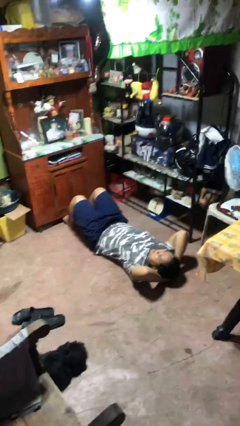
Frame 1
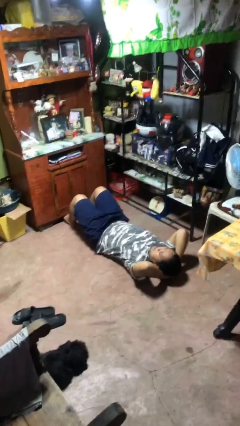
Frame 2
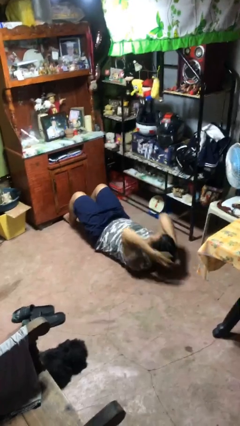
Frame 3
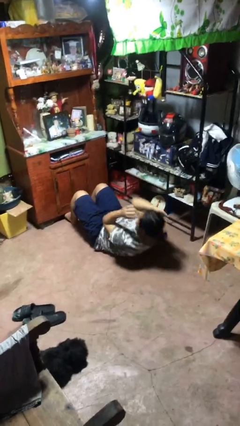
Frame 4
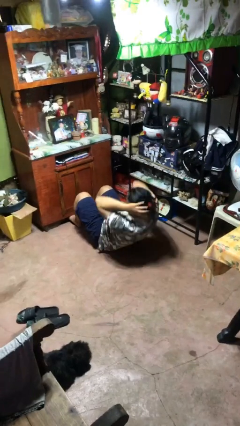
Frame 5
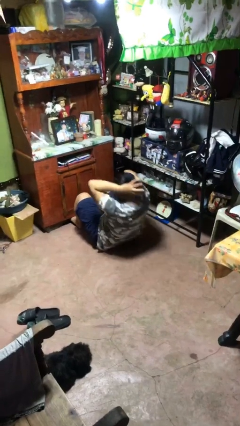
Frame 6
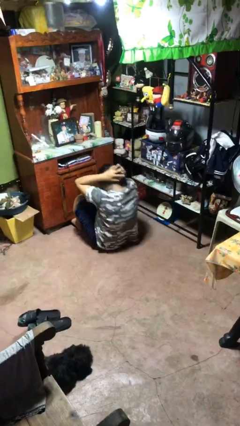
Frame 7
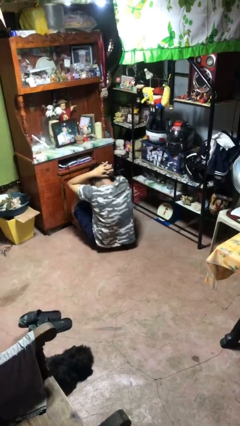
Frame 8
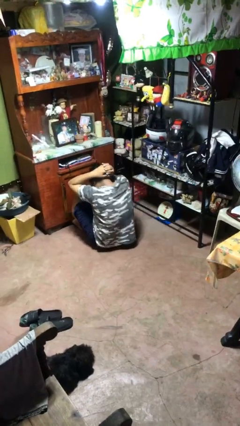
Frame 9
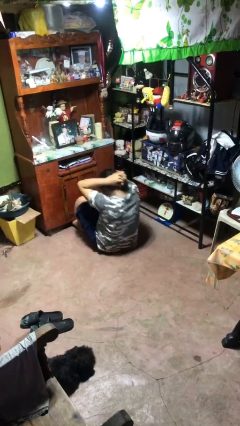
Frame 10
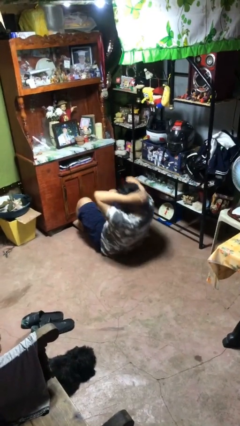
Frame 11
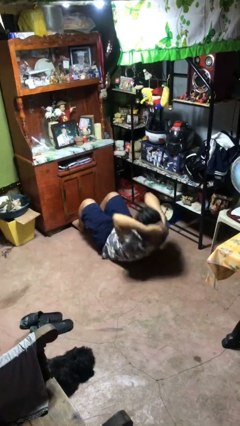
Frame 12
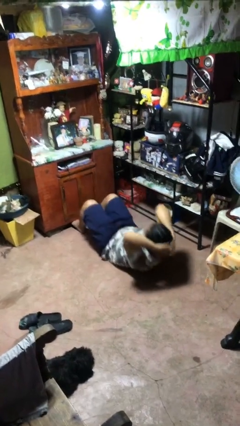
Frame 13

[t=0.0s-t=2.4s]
person exercises with situp

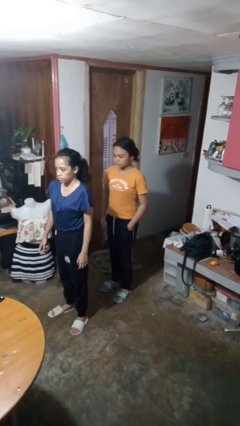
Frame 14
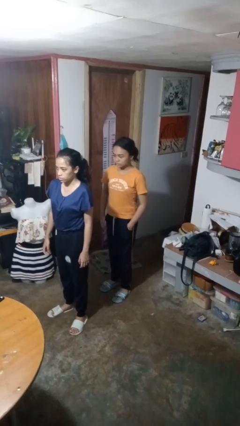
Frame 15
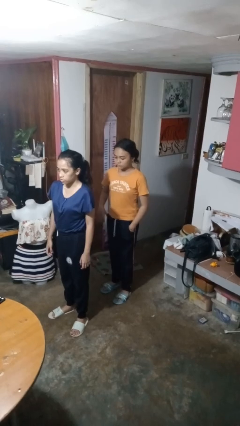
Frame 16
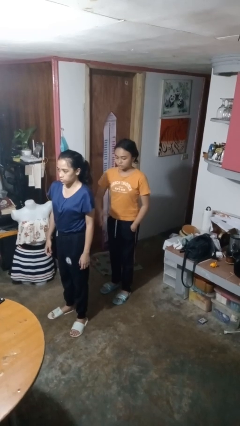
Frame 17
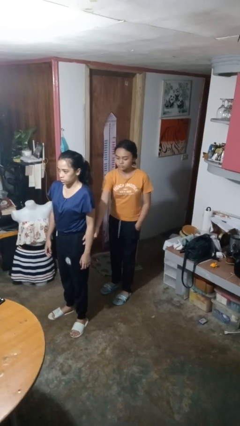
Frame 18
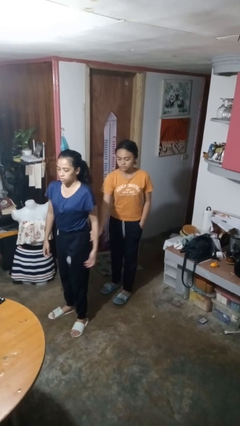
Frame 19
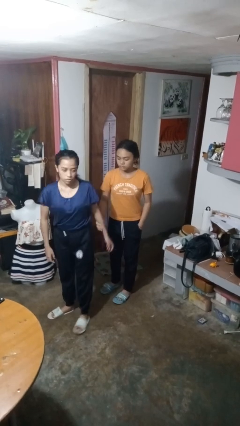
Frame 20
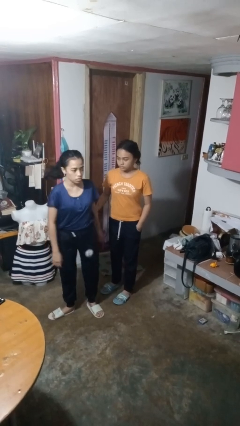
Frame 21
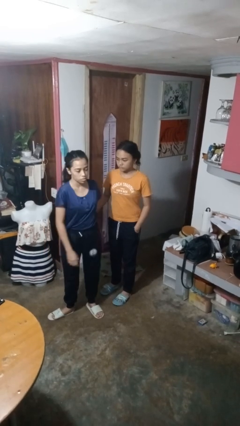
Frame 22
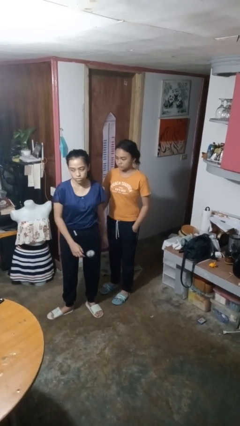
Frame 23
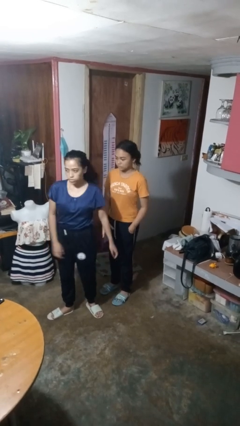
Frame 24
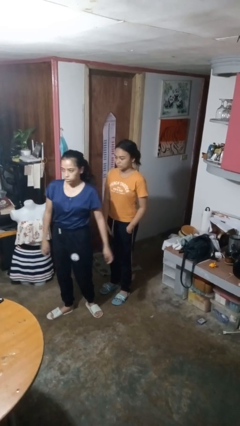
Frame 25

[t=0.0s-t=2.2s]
person grabs person by forearm

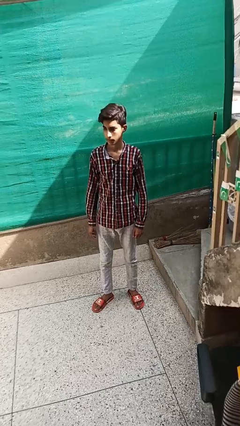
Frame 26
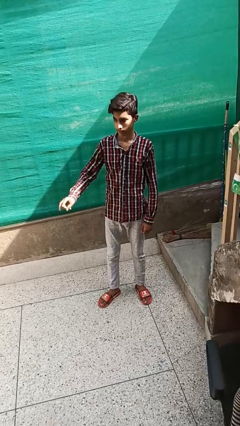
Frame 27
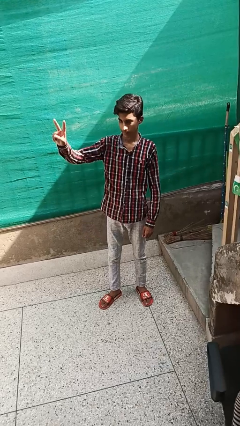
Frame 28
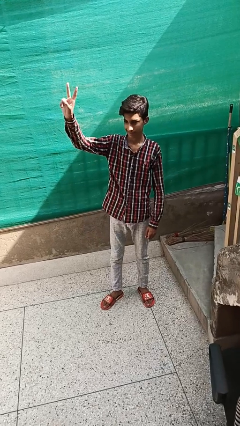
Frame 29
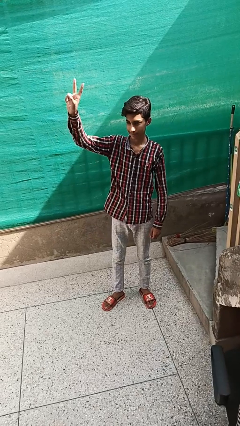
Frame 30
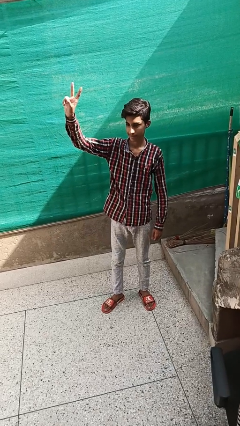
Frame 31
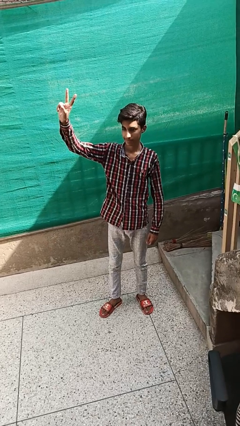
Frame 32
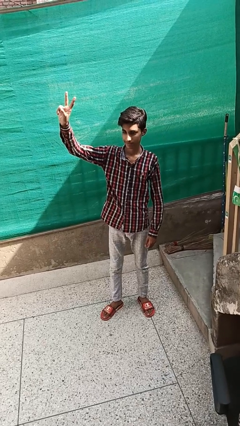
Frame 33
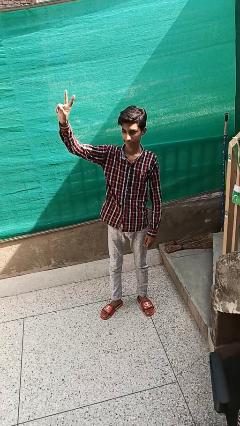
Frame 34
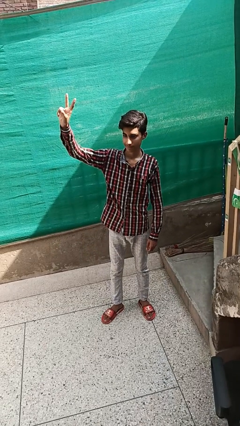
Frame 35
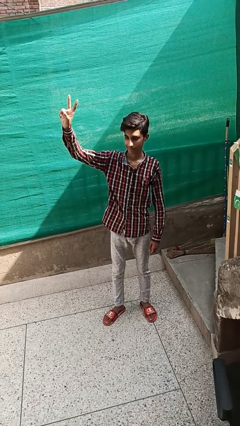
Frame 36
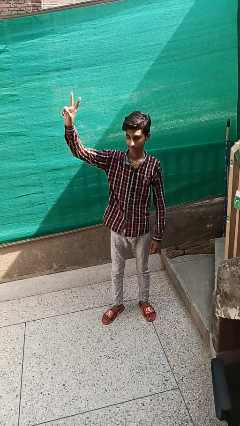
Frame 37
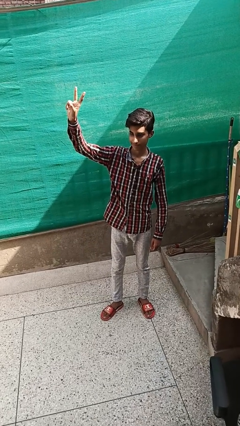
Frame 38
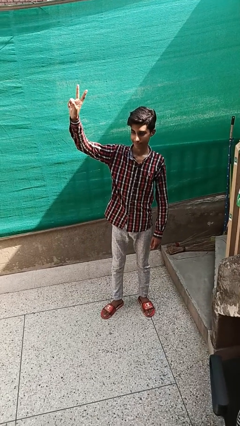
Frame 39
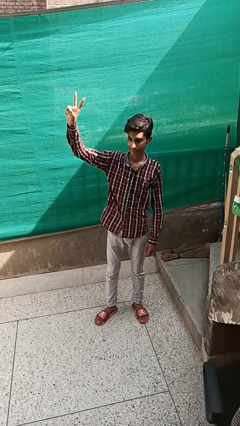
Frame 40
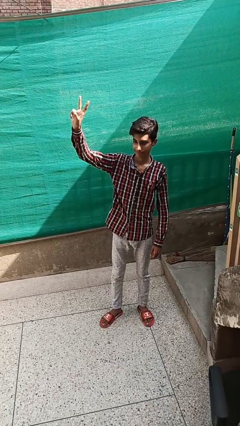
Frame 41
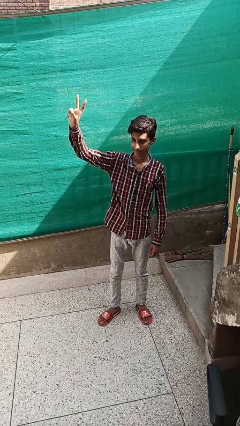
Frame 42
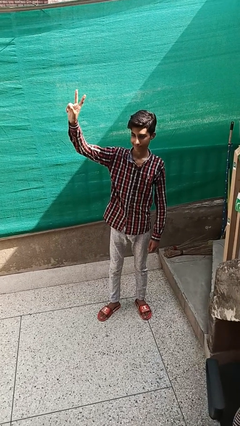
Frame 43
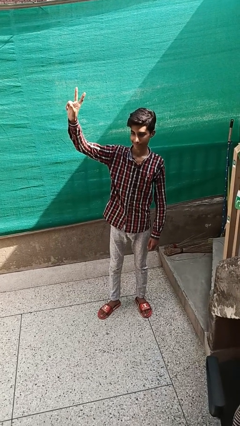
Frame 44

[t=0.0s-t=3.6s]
person gestures peace

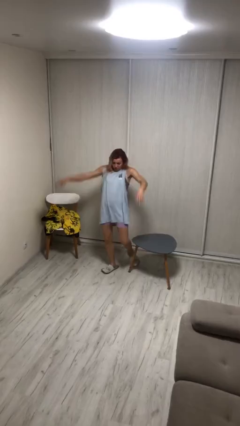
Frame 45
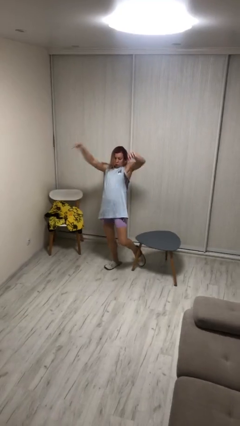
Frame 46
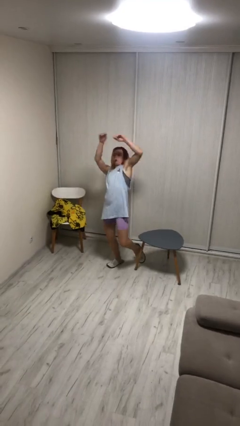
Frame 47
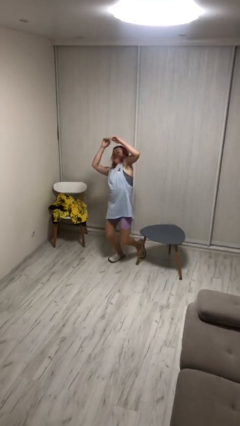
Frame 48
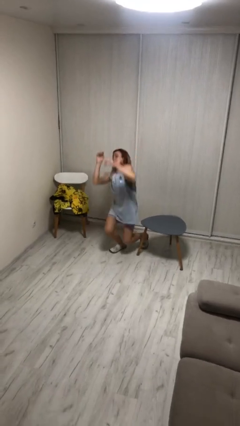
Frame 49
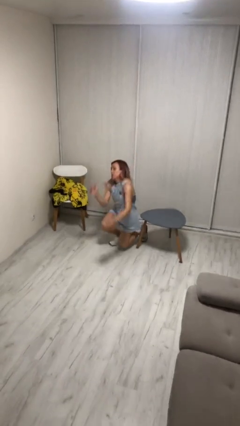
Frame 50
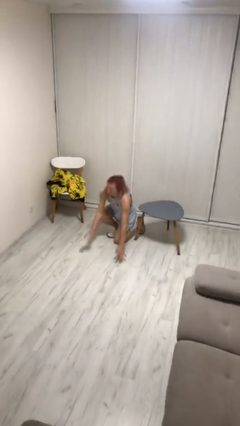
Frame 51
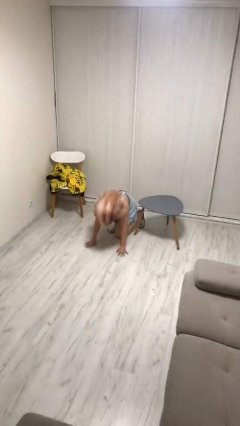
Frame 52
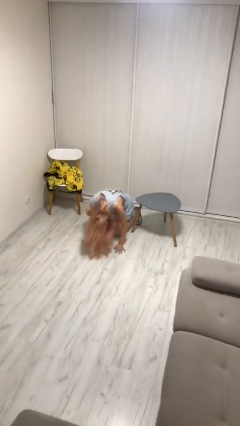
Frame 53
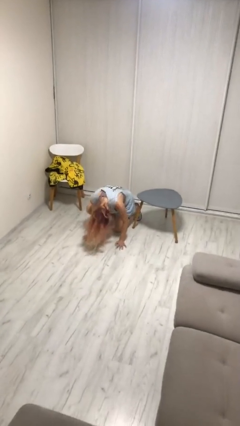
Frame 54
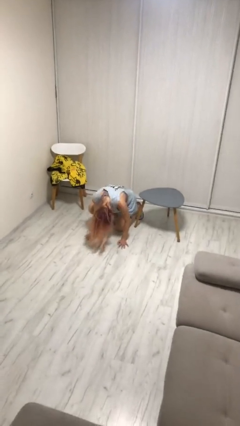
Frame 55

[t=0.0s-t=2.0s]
person trips on object on floor

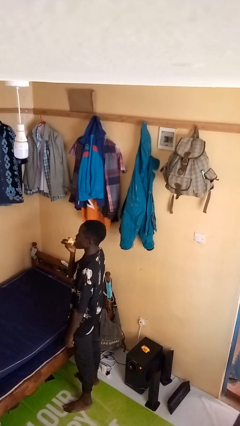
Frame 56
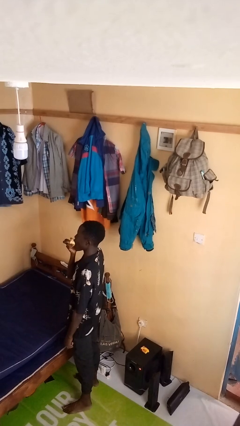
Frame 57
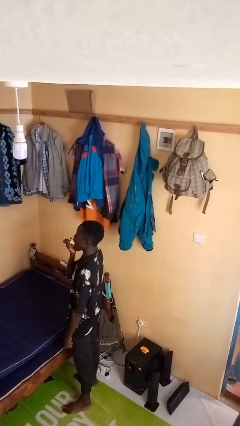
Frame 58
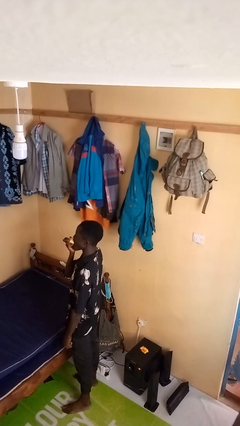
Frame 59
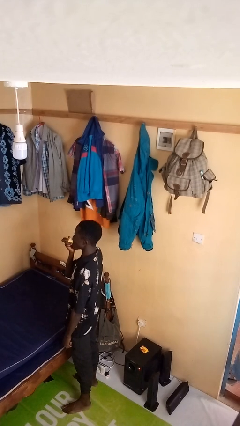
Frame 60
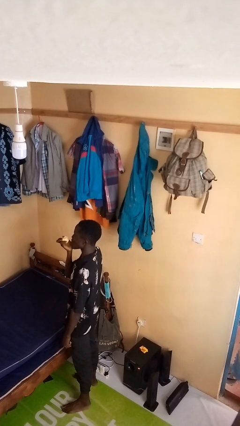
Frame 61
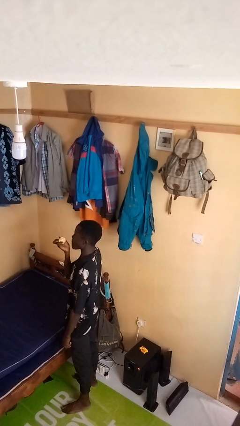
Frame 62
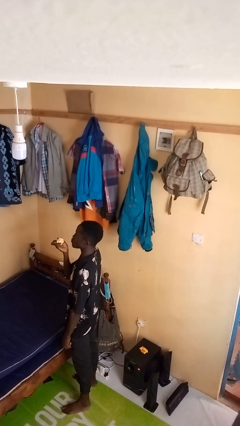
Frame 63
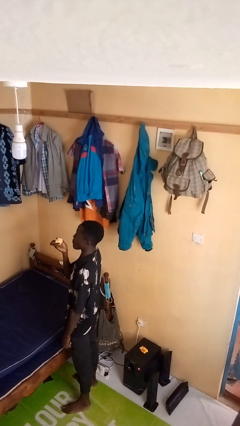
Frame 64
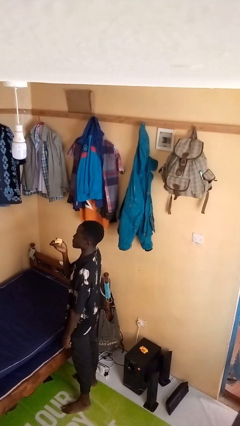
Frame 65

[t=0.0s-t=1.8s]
person eats apple

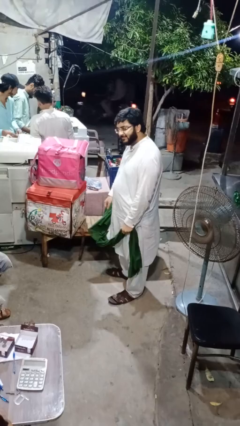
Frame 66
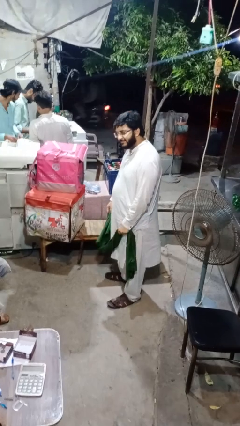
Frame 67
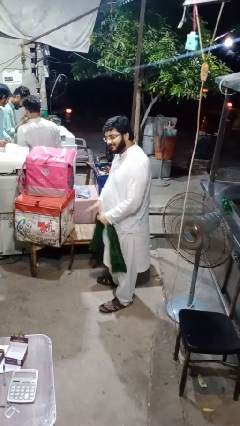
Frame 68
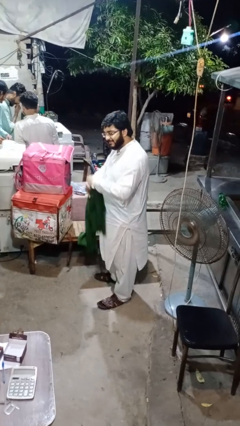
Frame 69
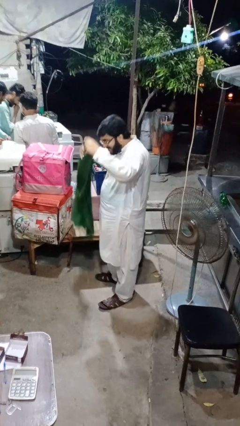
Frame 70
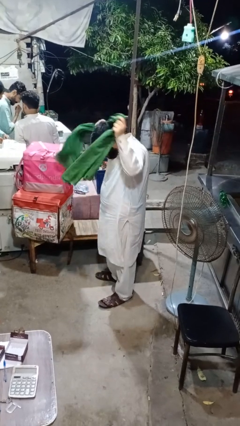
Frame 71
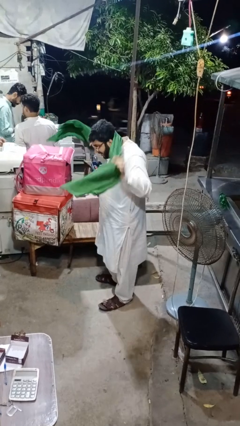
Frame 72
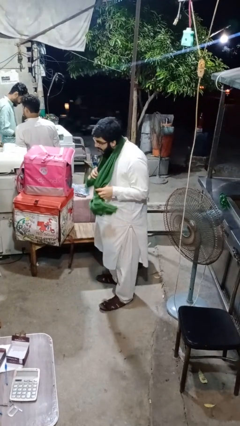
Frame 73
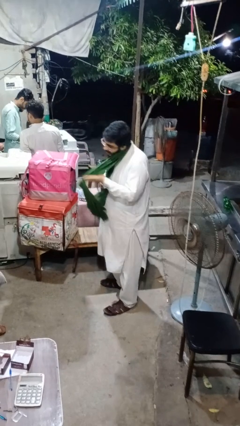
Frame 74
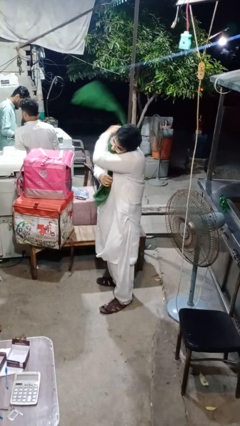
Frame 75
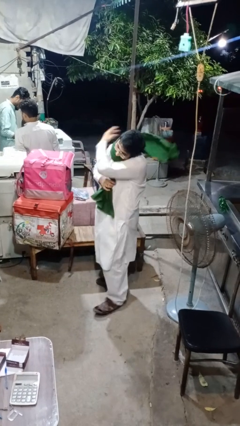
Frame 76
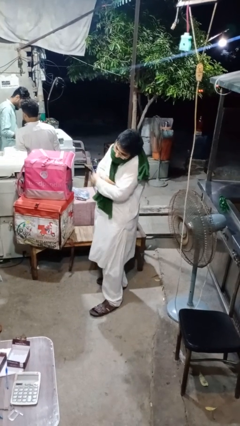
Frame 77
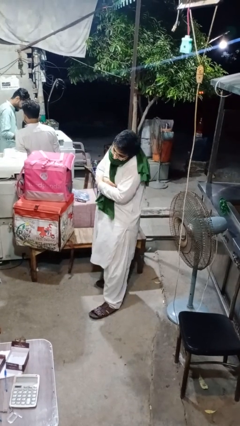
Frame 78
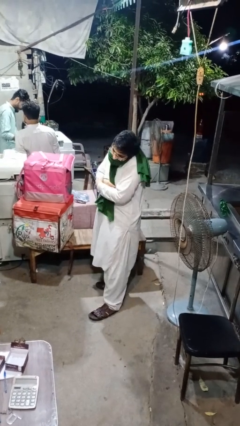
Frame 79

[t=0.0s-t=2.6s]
person puts on scarf

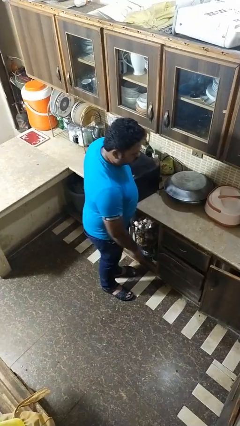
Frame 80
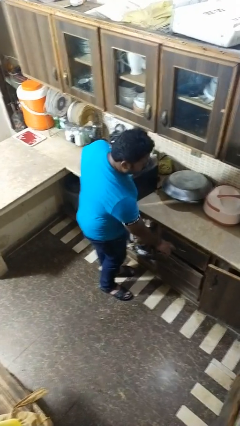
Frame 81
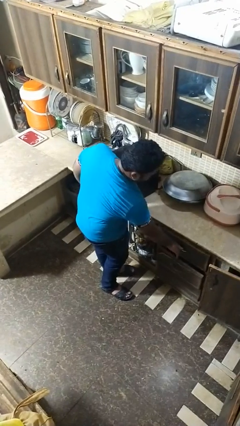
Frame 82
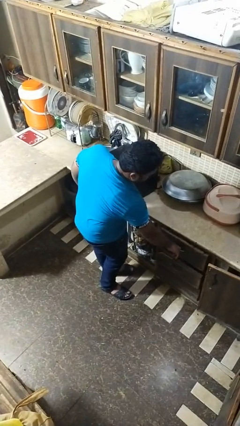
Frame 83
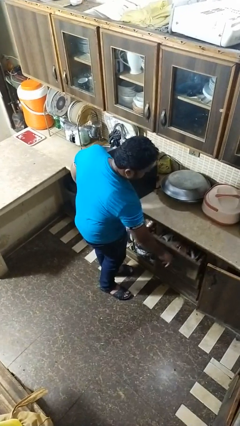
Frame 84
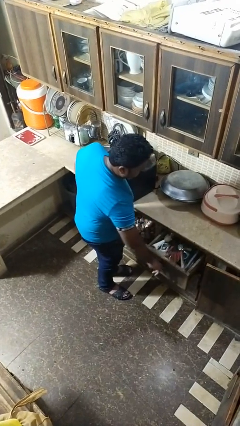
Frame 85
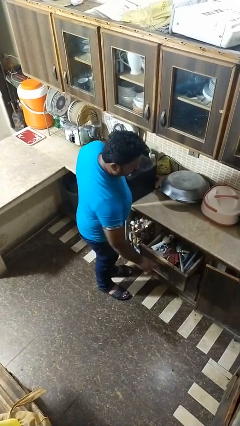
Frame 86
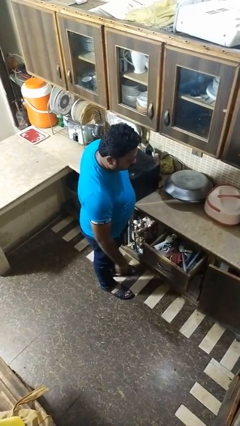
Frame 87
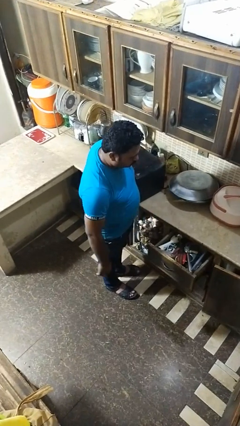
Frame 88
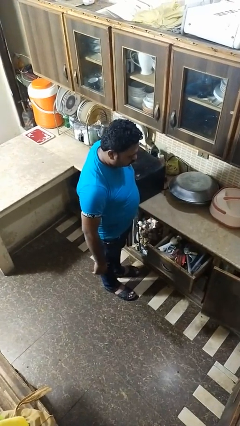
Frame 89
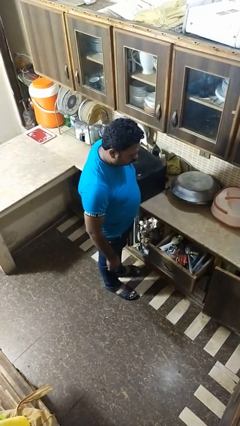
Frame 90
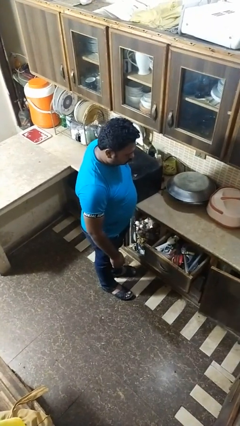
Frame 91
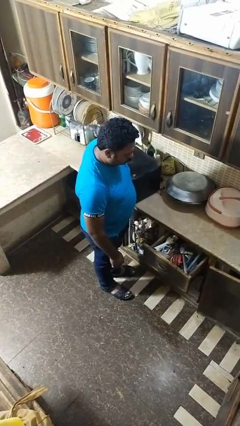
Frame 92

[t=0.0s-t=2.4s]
person opens dresser drawer
